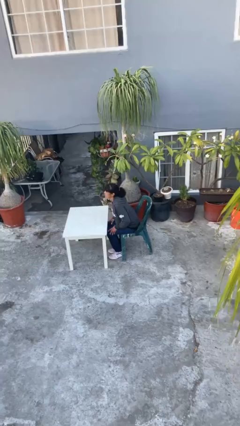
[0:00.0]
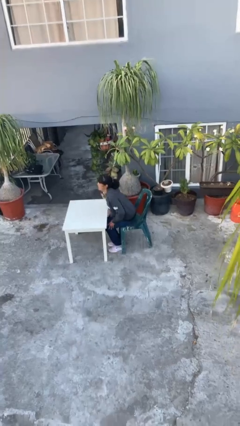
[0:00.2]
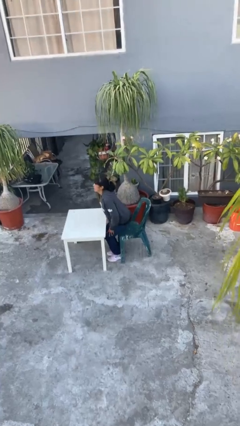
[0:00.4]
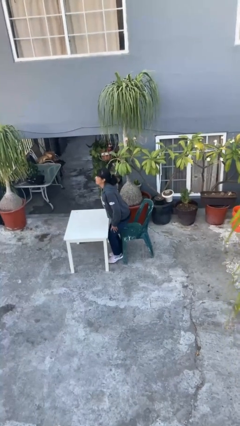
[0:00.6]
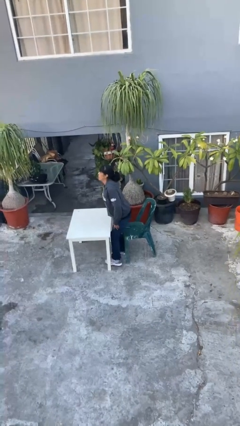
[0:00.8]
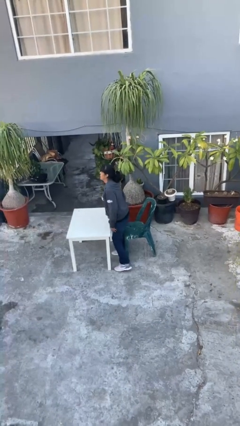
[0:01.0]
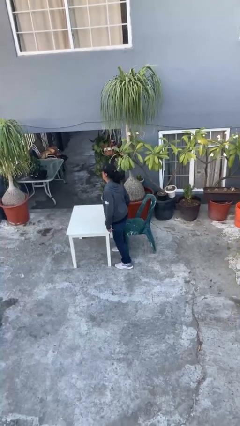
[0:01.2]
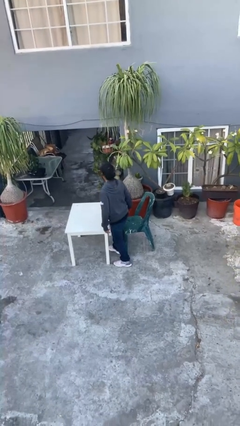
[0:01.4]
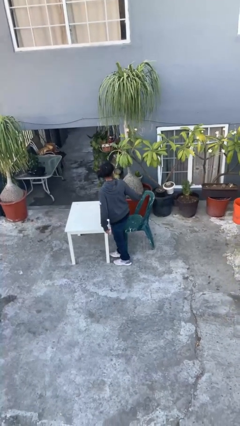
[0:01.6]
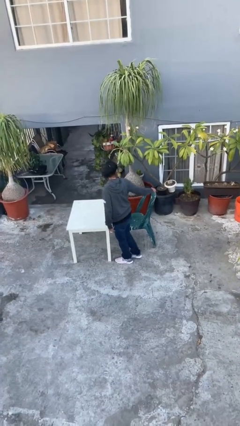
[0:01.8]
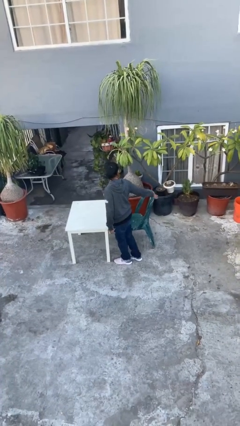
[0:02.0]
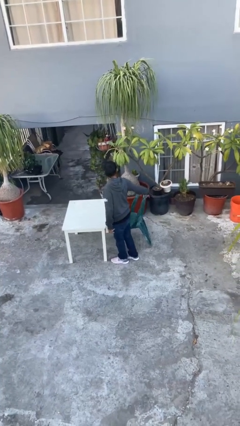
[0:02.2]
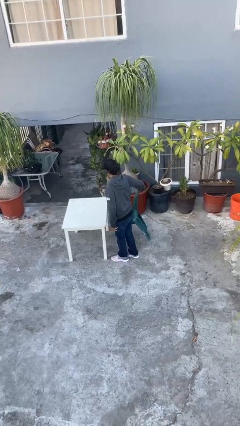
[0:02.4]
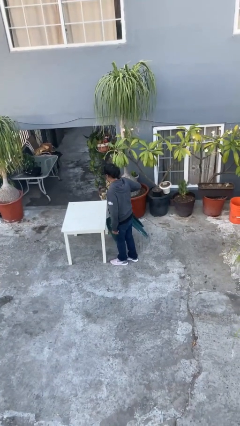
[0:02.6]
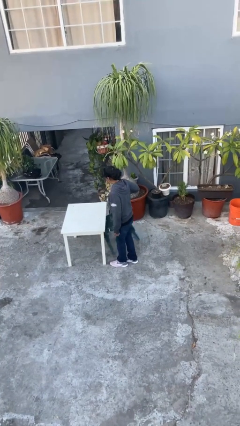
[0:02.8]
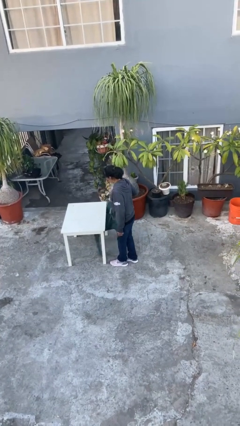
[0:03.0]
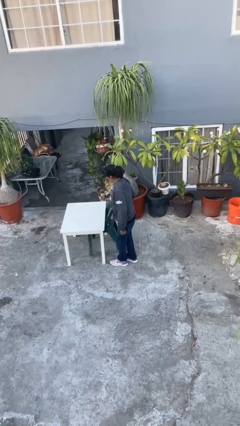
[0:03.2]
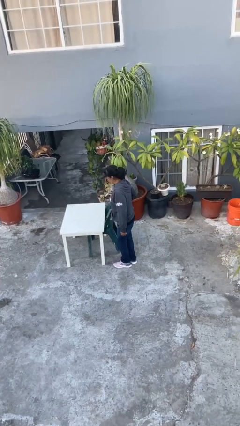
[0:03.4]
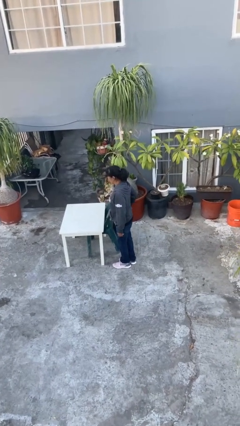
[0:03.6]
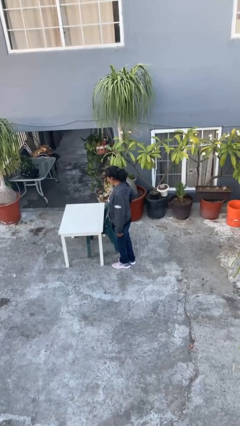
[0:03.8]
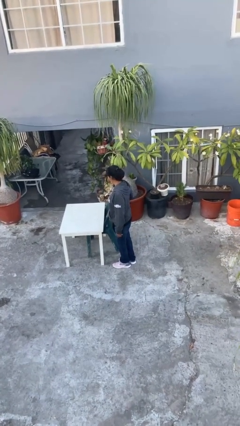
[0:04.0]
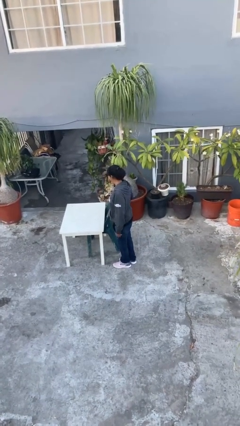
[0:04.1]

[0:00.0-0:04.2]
person stands up

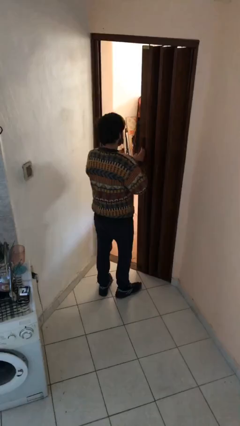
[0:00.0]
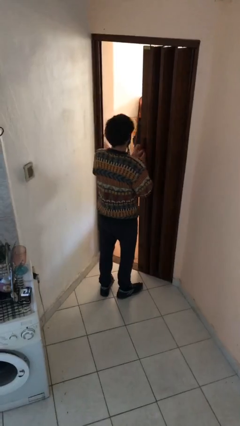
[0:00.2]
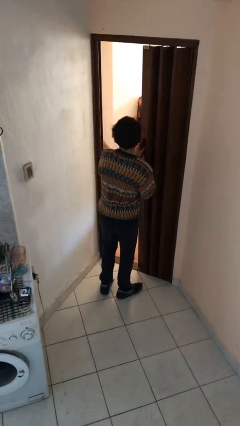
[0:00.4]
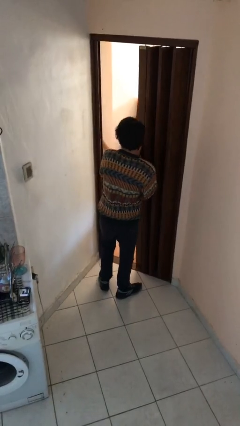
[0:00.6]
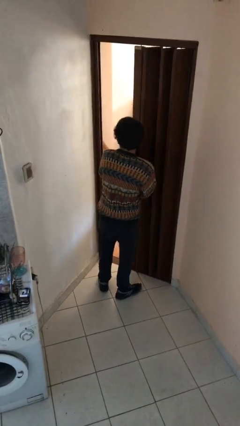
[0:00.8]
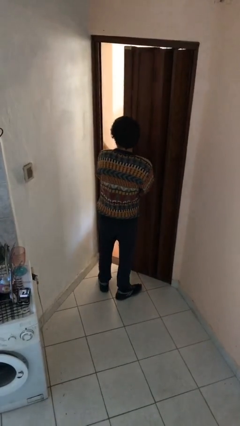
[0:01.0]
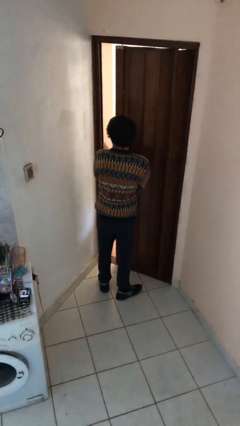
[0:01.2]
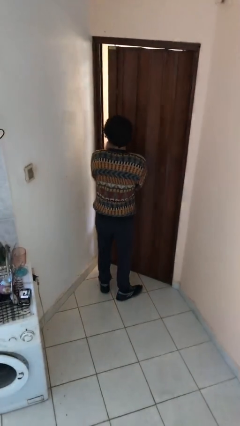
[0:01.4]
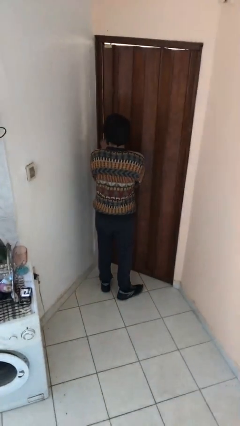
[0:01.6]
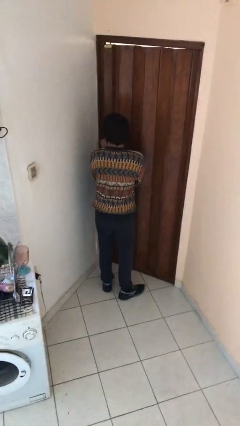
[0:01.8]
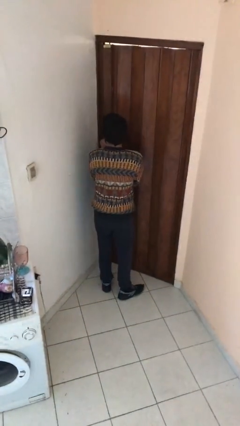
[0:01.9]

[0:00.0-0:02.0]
person closes sliding door

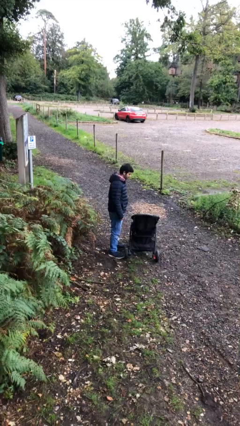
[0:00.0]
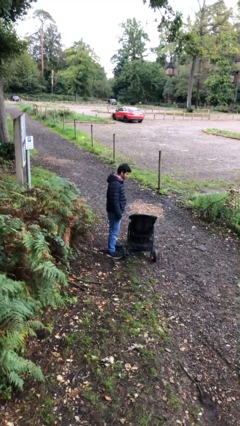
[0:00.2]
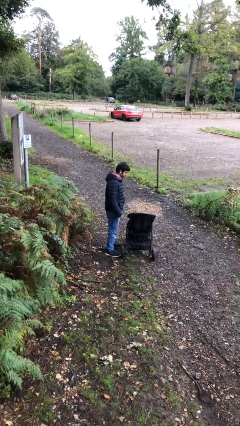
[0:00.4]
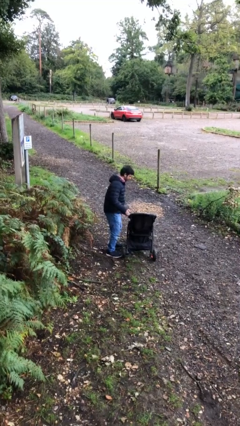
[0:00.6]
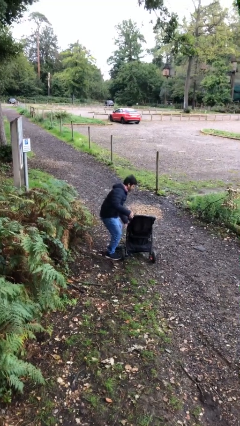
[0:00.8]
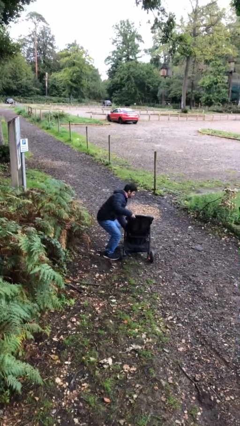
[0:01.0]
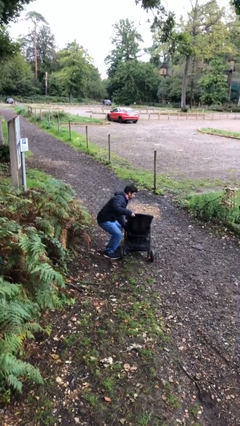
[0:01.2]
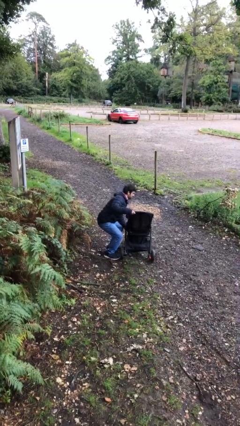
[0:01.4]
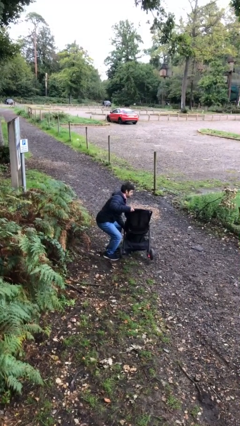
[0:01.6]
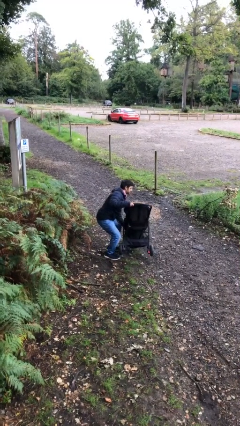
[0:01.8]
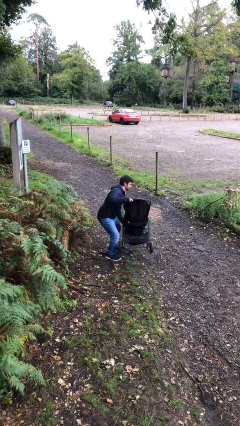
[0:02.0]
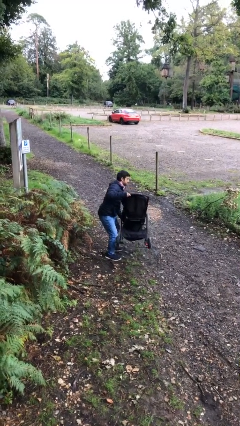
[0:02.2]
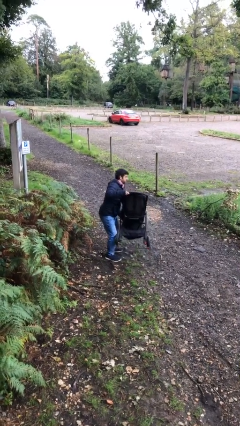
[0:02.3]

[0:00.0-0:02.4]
person picks up object from floor

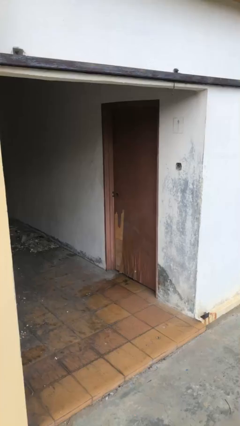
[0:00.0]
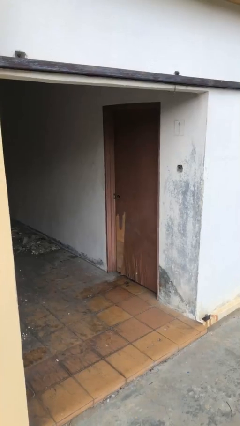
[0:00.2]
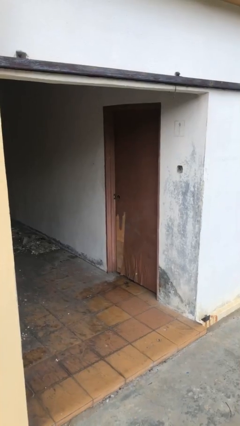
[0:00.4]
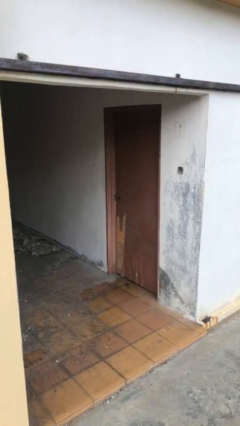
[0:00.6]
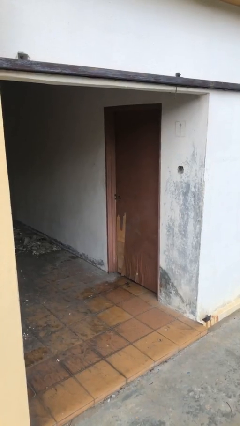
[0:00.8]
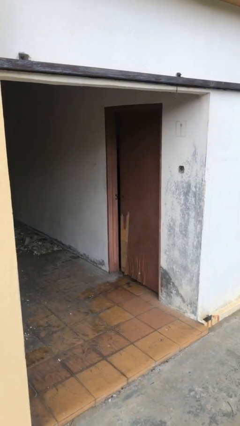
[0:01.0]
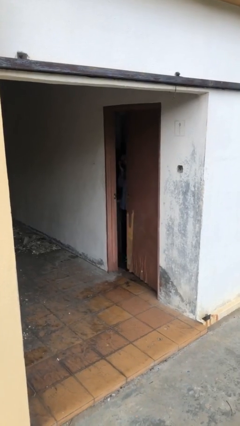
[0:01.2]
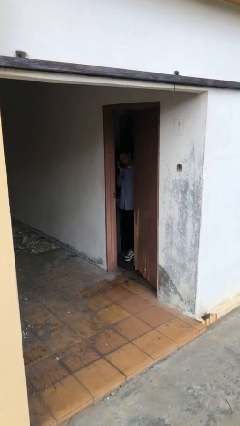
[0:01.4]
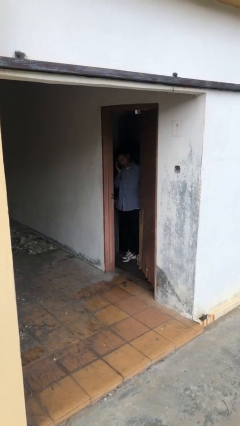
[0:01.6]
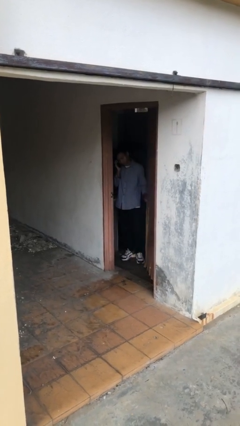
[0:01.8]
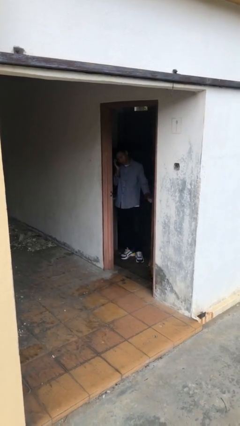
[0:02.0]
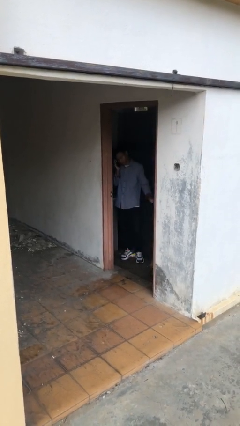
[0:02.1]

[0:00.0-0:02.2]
person opens facility door

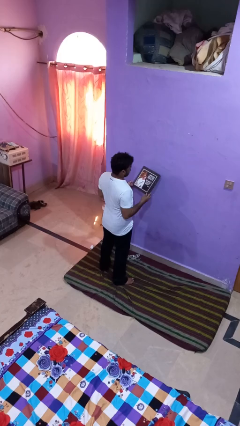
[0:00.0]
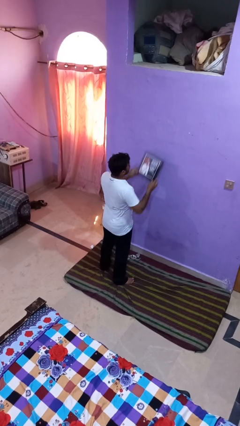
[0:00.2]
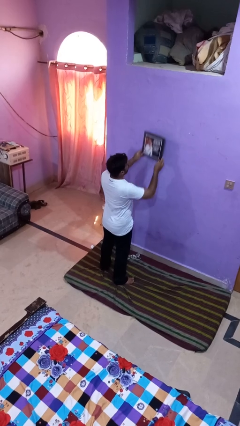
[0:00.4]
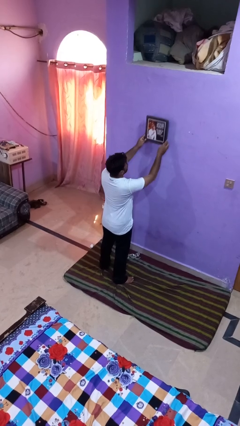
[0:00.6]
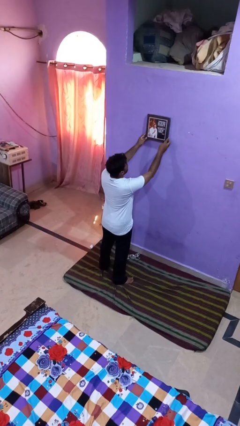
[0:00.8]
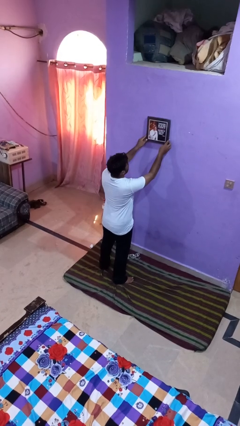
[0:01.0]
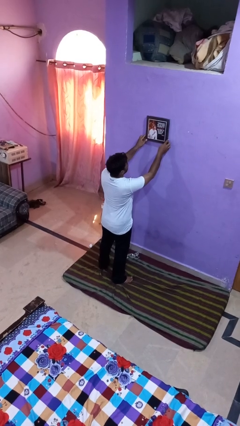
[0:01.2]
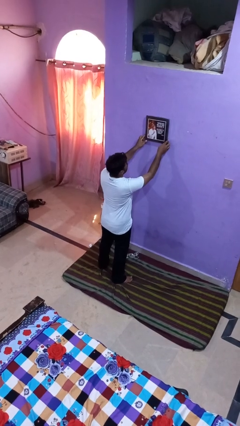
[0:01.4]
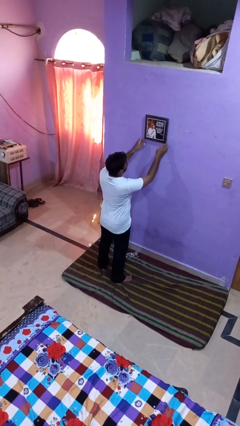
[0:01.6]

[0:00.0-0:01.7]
person takes down picture frame

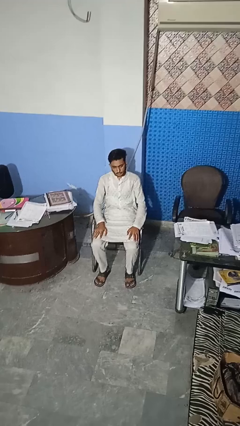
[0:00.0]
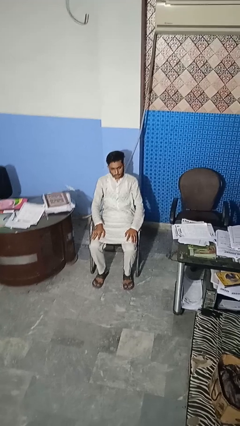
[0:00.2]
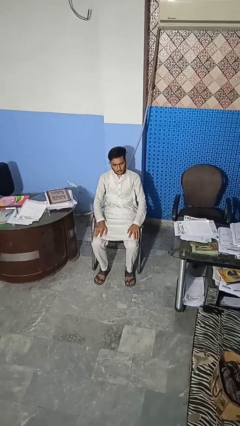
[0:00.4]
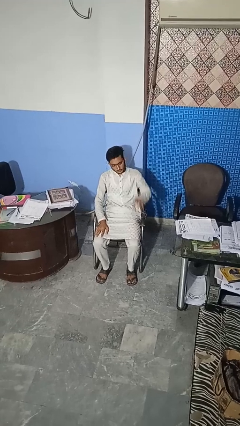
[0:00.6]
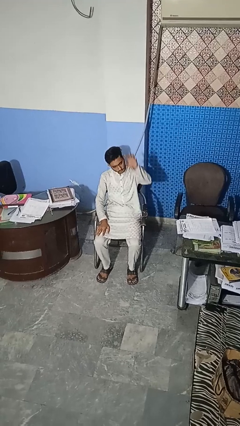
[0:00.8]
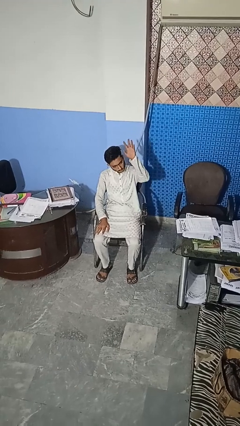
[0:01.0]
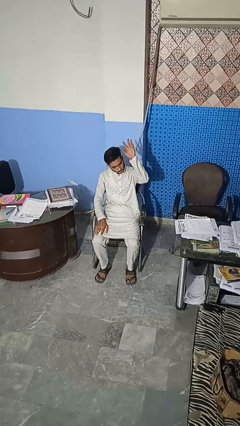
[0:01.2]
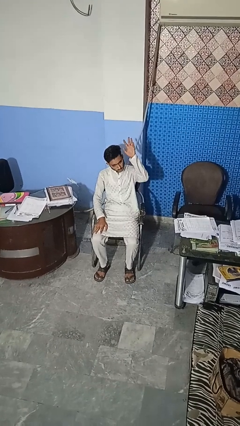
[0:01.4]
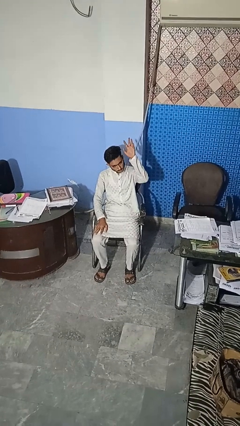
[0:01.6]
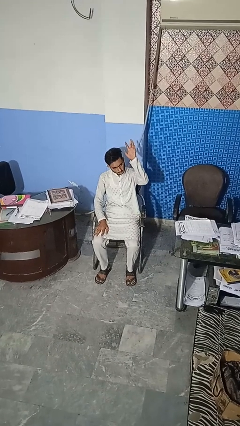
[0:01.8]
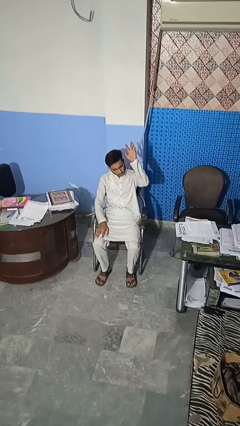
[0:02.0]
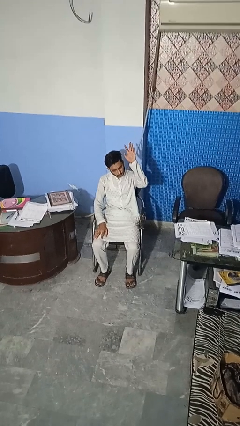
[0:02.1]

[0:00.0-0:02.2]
person gestures raise hand

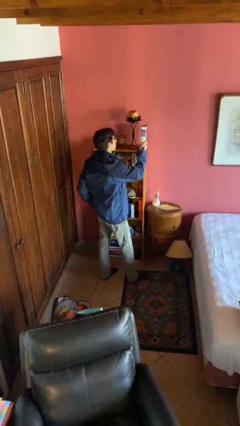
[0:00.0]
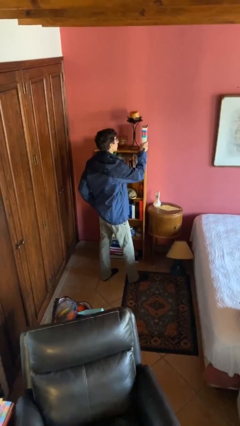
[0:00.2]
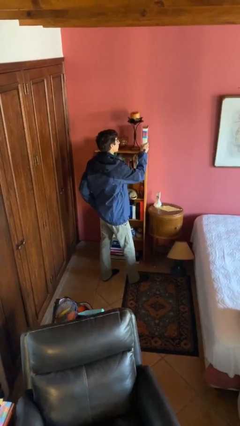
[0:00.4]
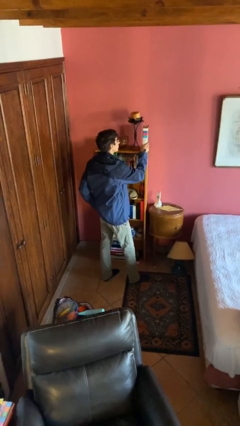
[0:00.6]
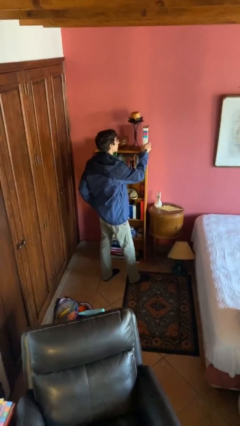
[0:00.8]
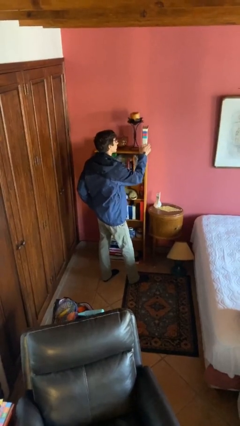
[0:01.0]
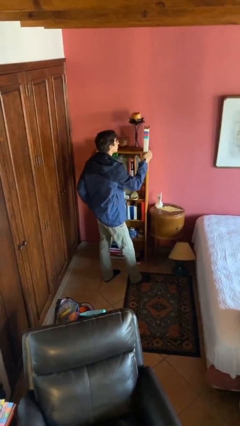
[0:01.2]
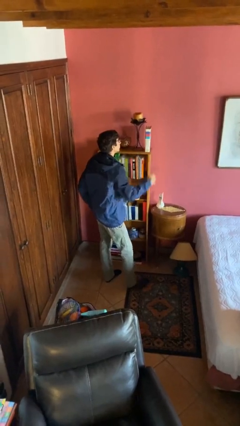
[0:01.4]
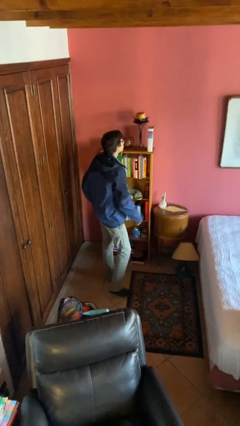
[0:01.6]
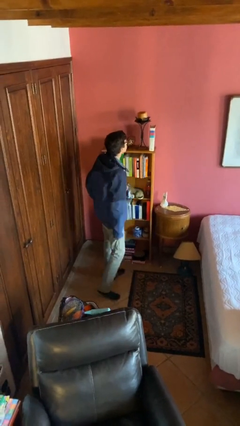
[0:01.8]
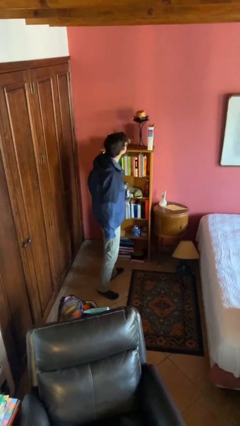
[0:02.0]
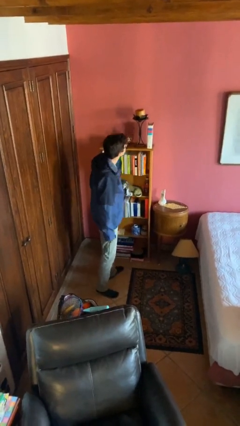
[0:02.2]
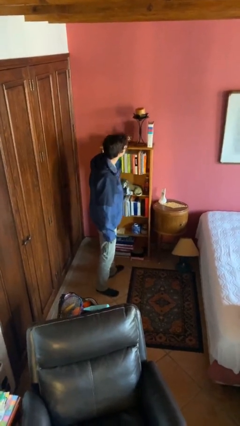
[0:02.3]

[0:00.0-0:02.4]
person puts down object on shelf
